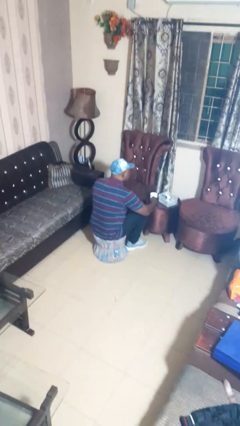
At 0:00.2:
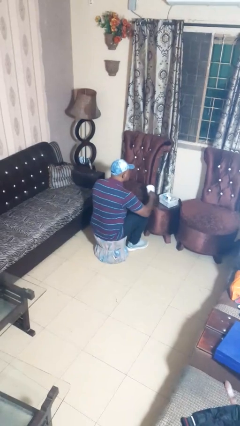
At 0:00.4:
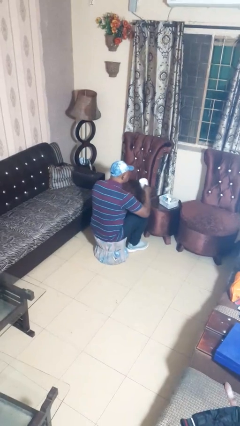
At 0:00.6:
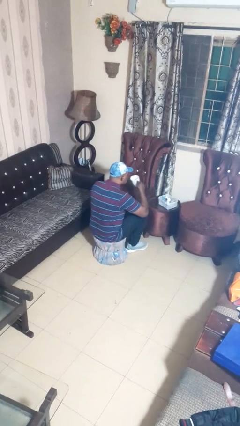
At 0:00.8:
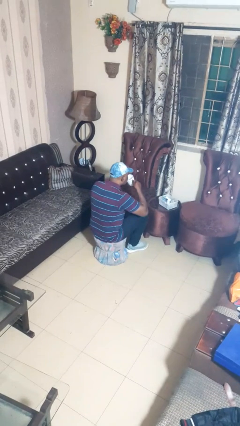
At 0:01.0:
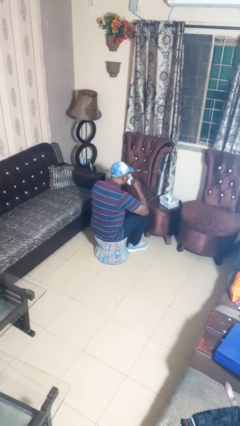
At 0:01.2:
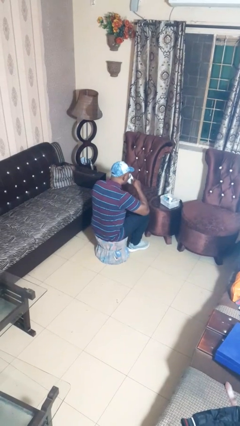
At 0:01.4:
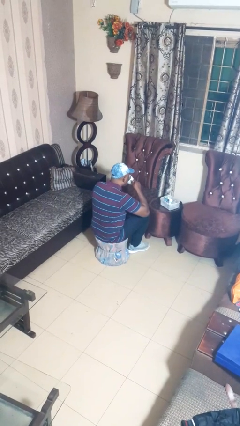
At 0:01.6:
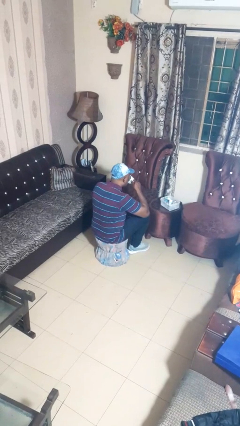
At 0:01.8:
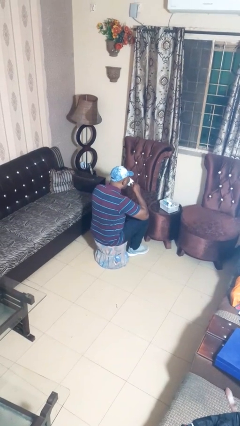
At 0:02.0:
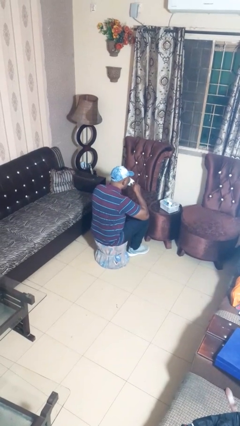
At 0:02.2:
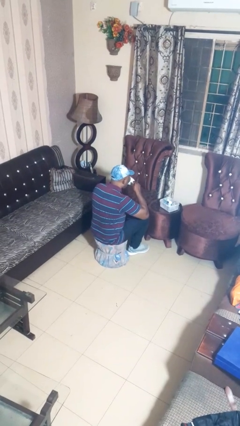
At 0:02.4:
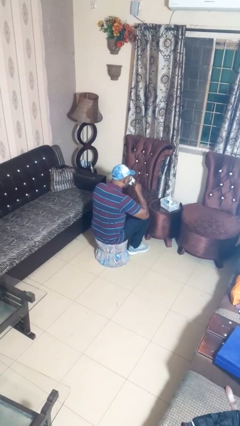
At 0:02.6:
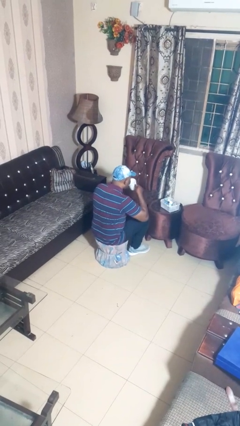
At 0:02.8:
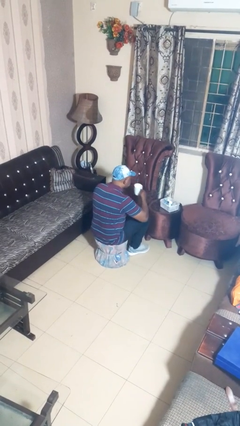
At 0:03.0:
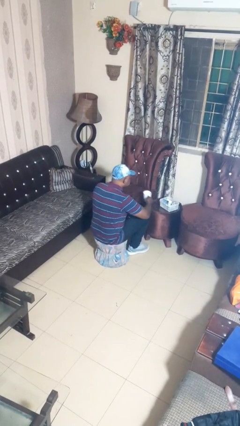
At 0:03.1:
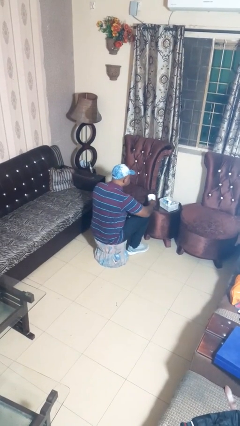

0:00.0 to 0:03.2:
person drinks from cup

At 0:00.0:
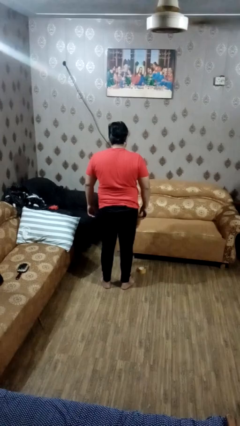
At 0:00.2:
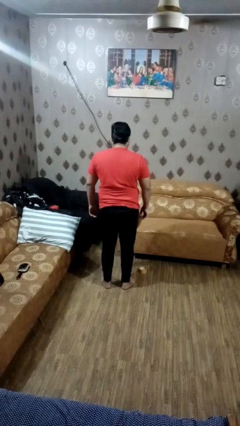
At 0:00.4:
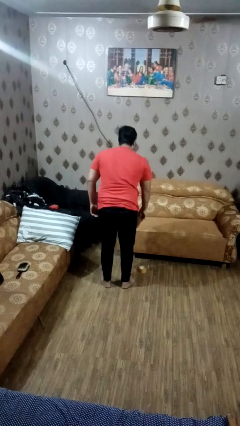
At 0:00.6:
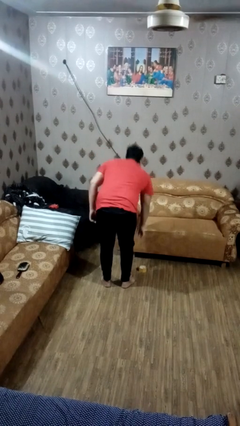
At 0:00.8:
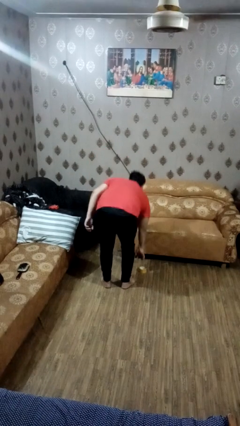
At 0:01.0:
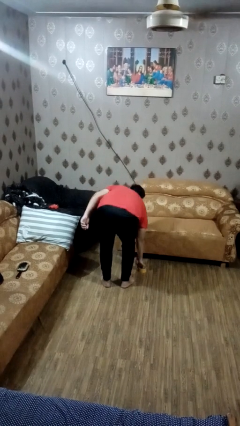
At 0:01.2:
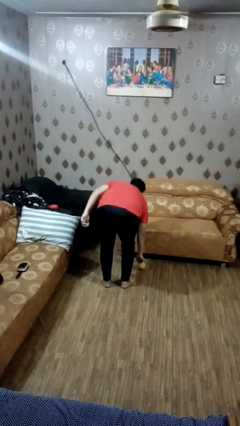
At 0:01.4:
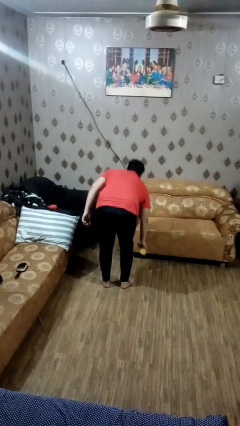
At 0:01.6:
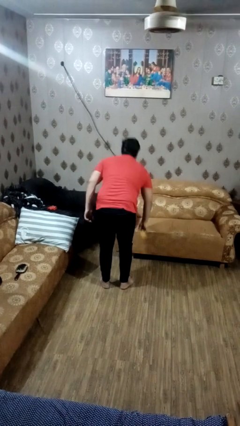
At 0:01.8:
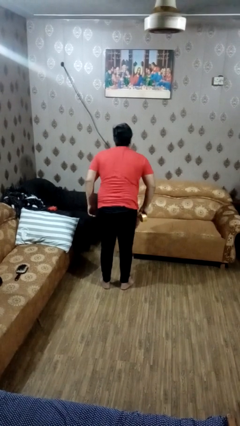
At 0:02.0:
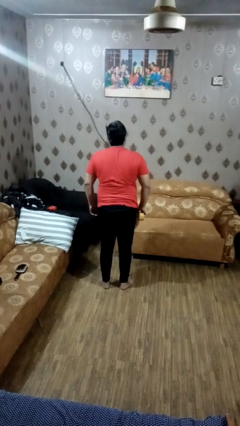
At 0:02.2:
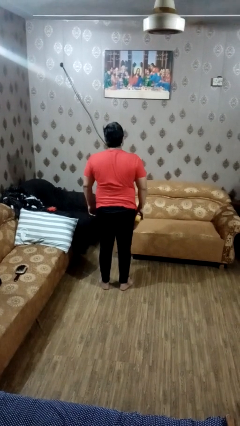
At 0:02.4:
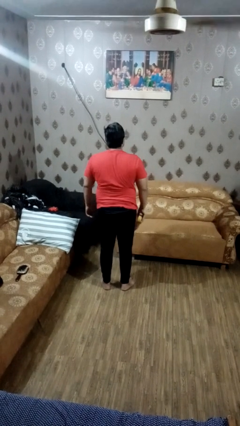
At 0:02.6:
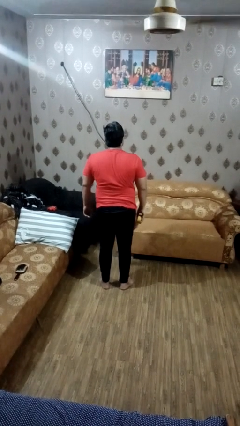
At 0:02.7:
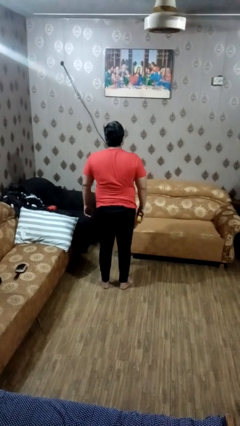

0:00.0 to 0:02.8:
person picks up object from floor

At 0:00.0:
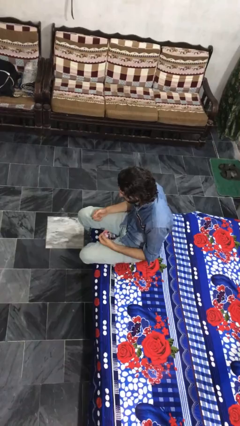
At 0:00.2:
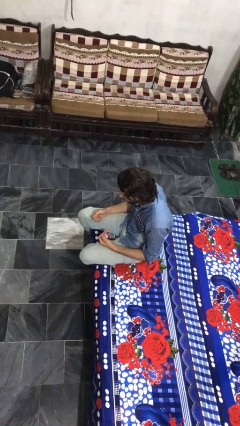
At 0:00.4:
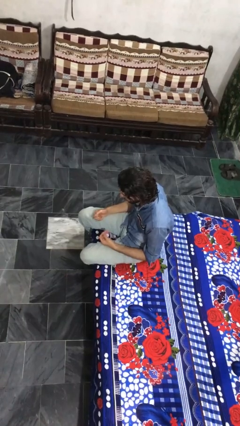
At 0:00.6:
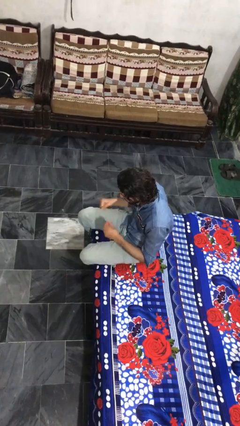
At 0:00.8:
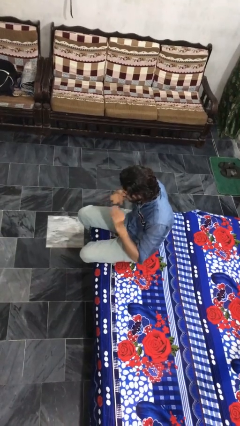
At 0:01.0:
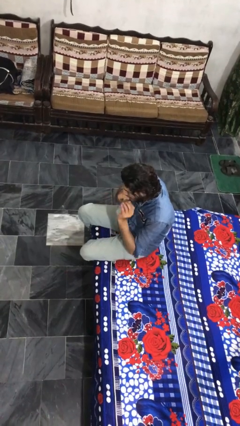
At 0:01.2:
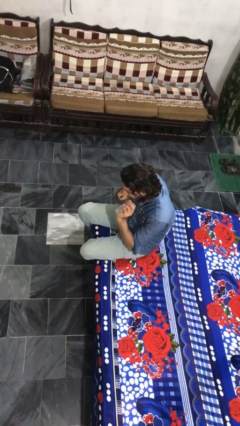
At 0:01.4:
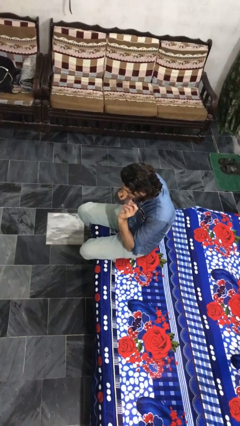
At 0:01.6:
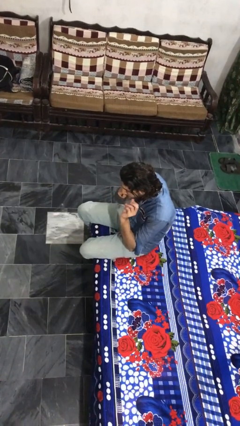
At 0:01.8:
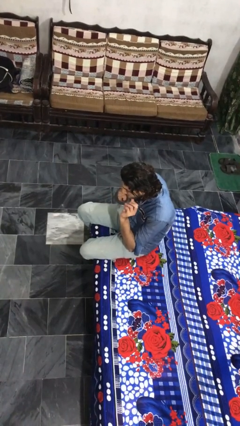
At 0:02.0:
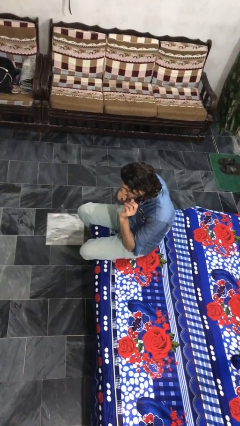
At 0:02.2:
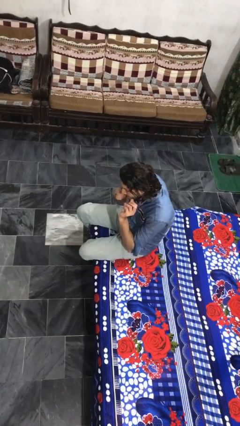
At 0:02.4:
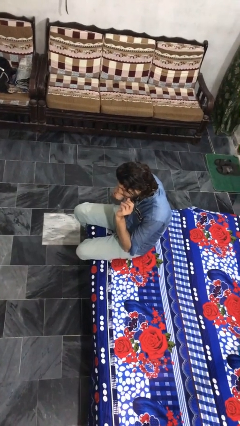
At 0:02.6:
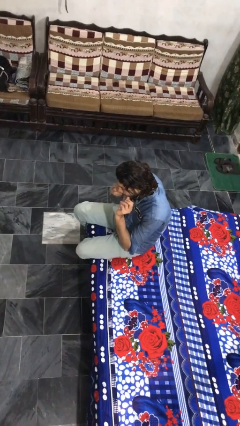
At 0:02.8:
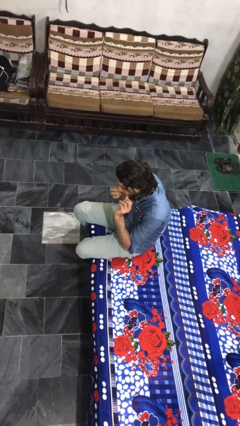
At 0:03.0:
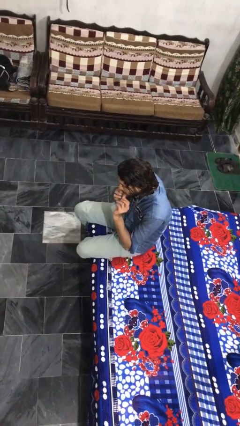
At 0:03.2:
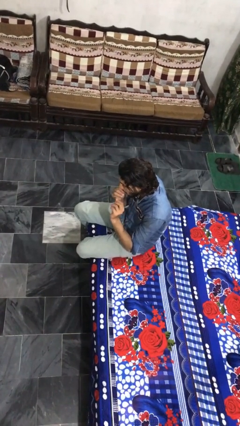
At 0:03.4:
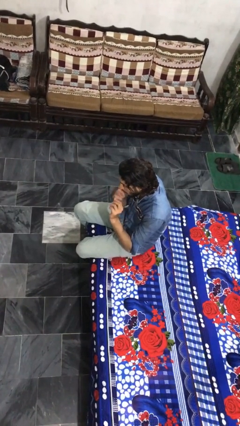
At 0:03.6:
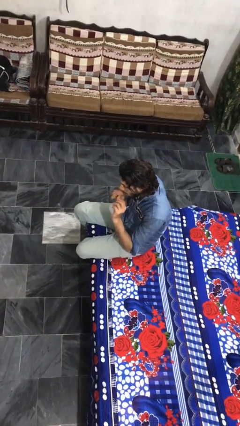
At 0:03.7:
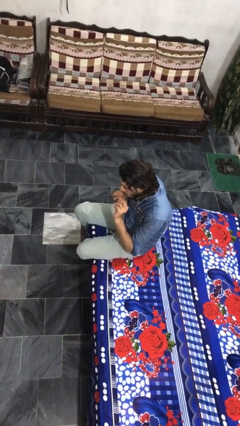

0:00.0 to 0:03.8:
person flosses

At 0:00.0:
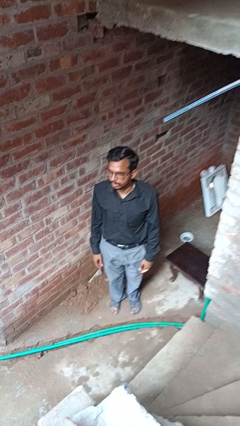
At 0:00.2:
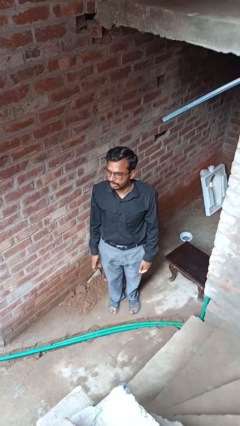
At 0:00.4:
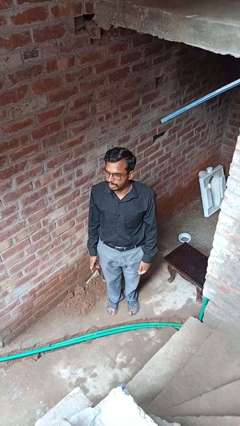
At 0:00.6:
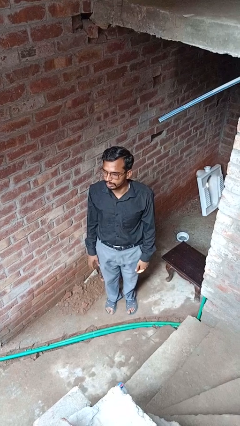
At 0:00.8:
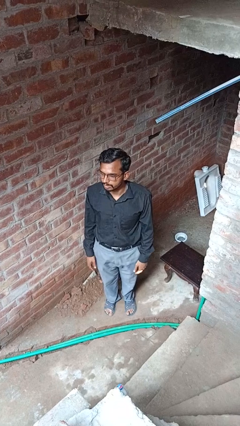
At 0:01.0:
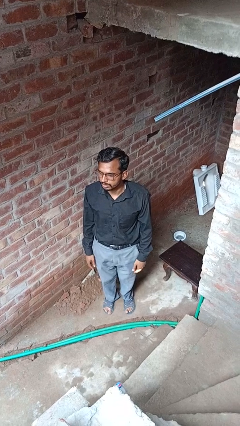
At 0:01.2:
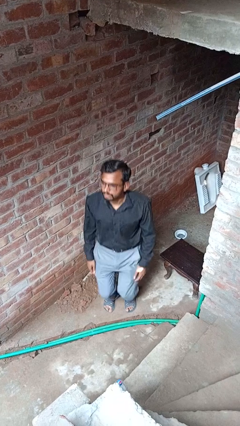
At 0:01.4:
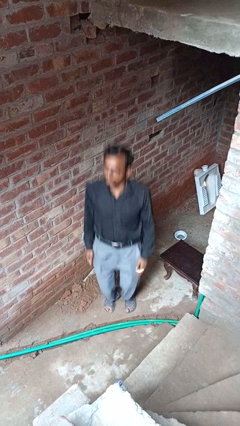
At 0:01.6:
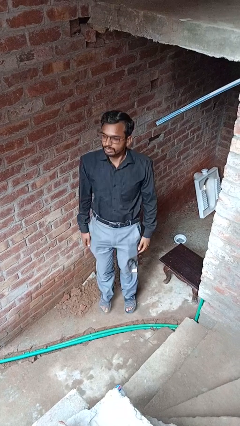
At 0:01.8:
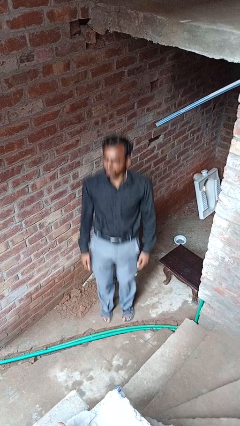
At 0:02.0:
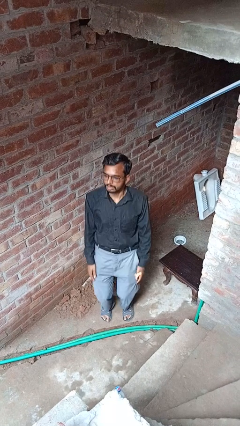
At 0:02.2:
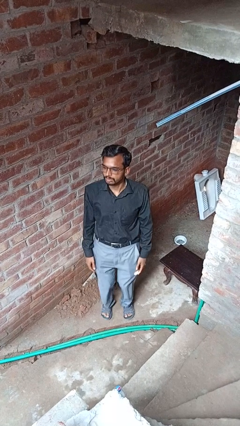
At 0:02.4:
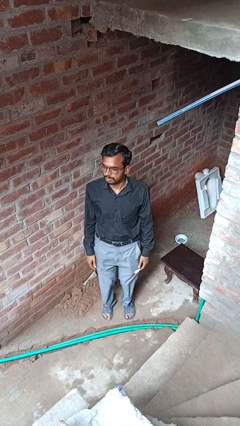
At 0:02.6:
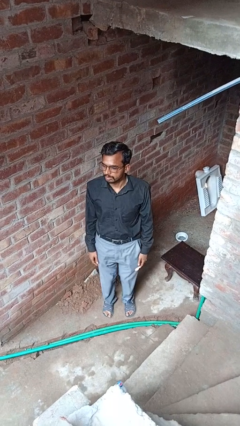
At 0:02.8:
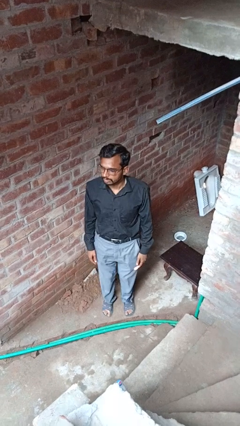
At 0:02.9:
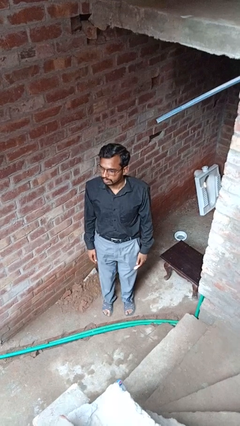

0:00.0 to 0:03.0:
person jumps

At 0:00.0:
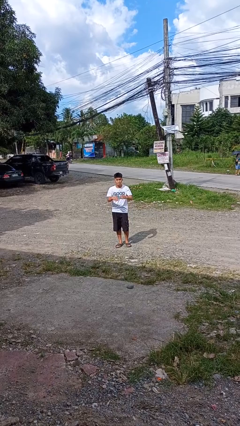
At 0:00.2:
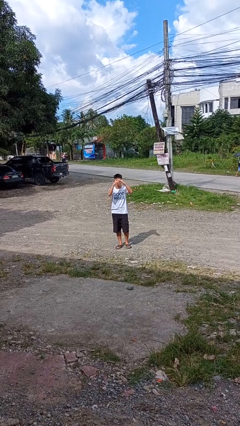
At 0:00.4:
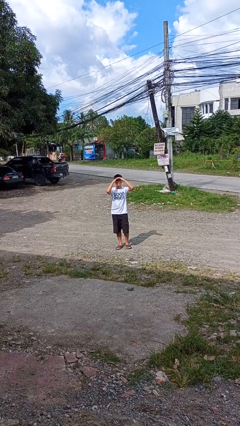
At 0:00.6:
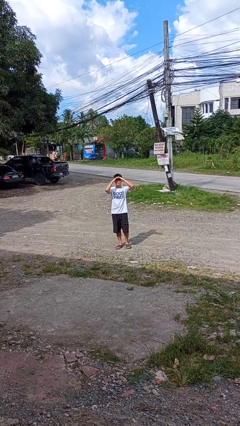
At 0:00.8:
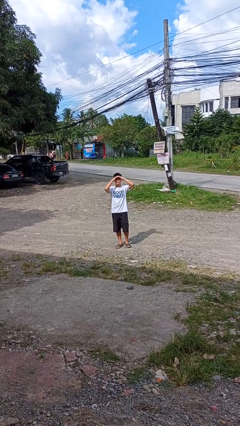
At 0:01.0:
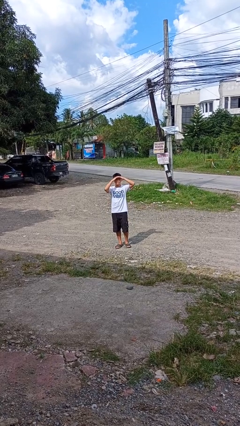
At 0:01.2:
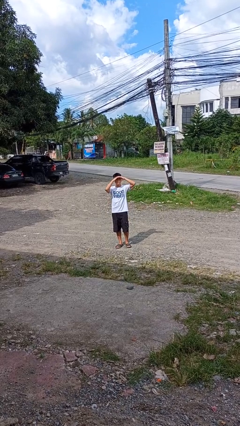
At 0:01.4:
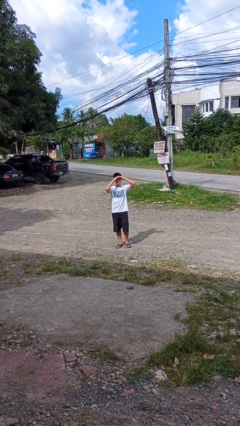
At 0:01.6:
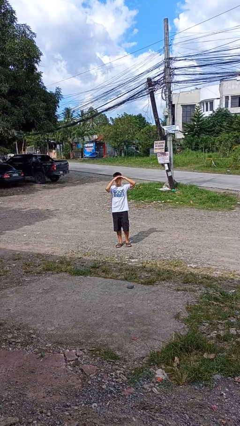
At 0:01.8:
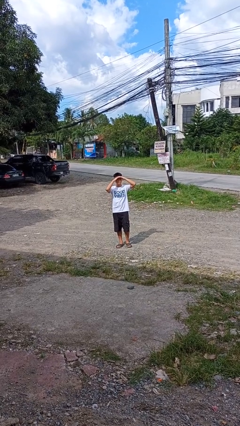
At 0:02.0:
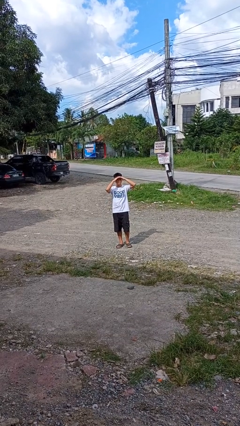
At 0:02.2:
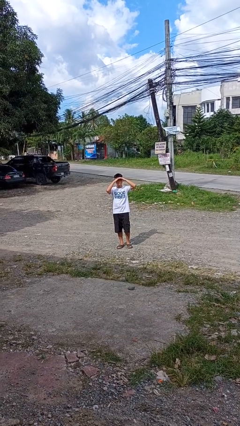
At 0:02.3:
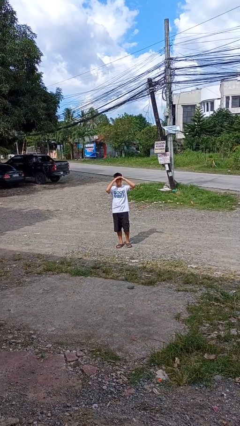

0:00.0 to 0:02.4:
person shades eyes

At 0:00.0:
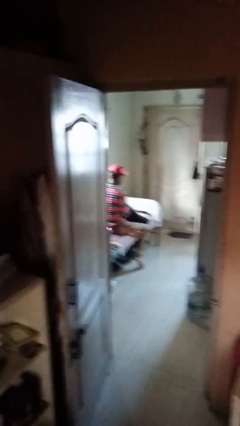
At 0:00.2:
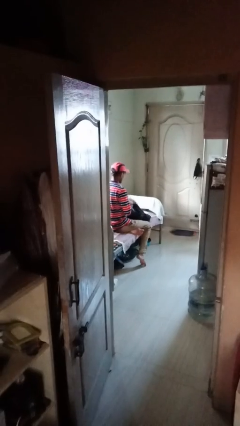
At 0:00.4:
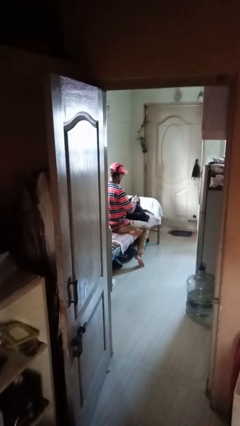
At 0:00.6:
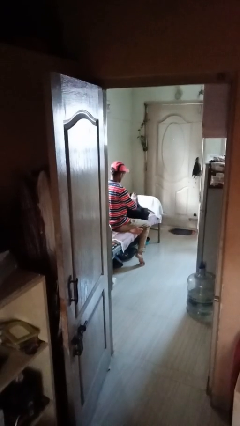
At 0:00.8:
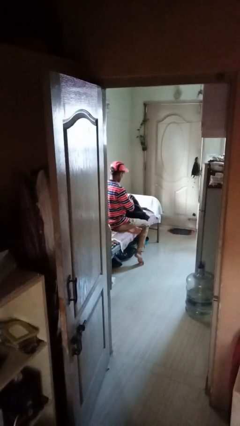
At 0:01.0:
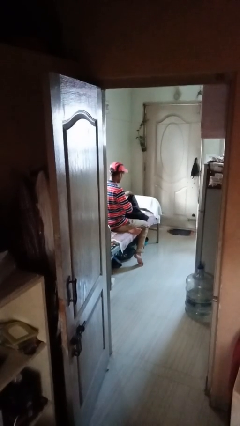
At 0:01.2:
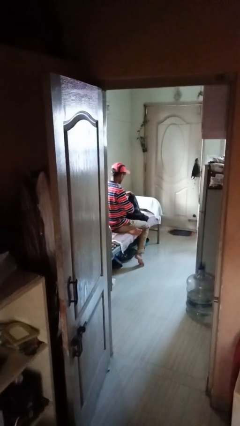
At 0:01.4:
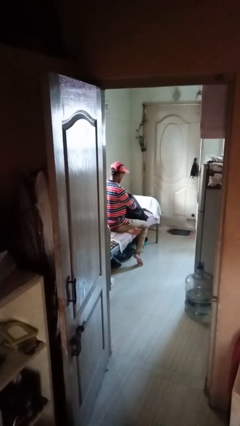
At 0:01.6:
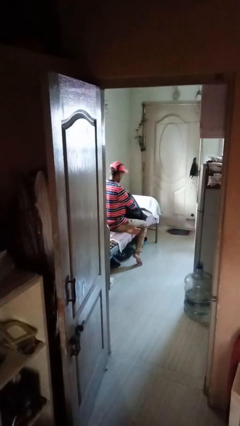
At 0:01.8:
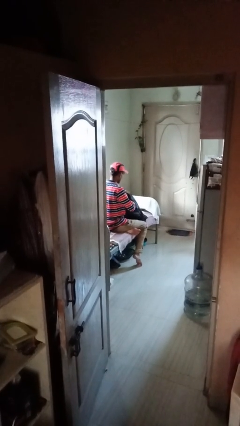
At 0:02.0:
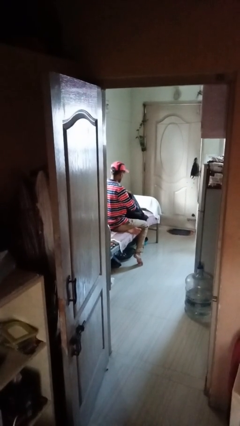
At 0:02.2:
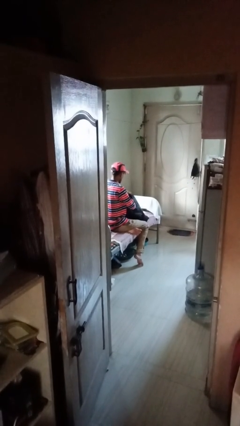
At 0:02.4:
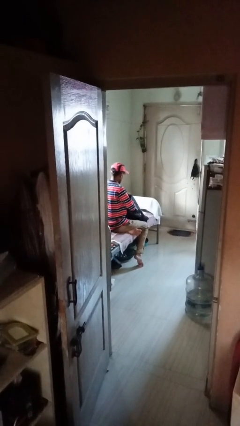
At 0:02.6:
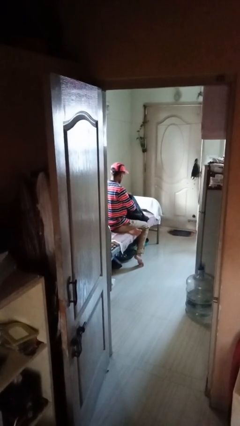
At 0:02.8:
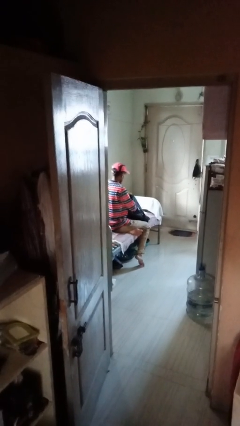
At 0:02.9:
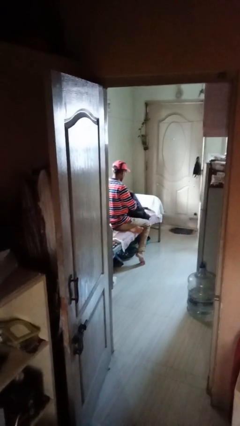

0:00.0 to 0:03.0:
person searches in backpack
